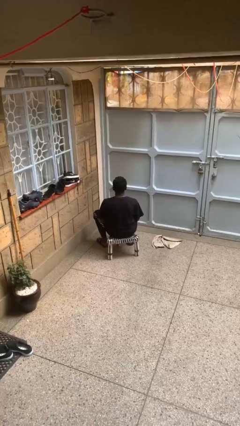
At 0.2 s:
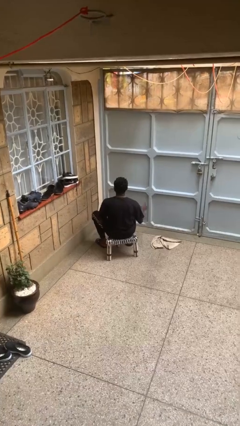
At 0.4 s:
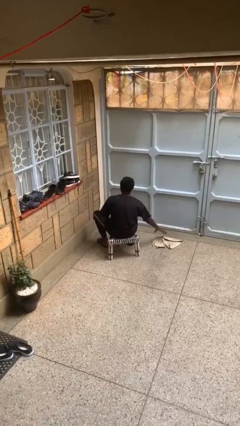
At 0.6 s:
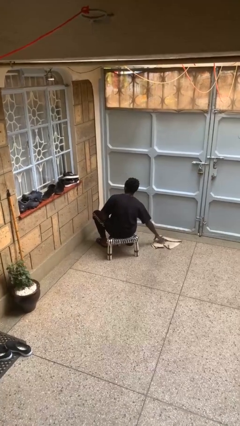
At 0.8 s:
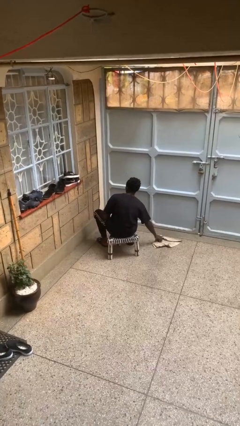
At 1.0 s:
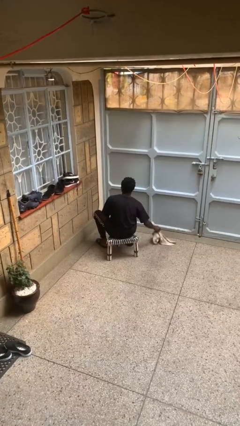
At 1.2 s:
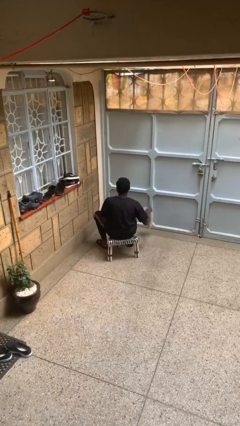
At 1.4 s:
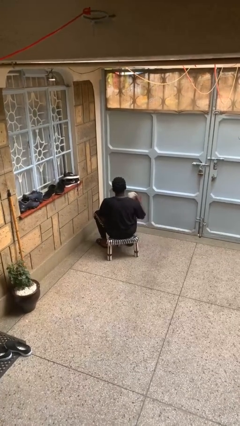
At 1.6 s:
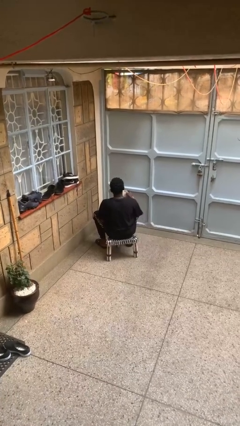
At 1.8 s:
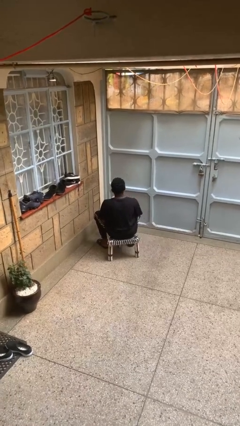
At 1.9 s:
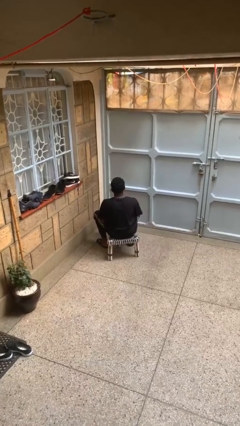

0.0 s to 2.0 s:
person picks up object from floor

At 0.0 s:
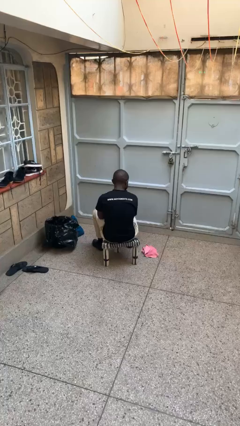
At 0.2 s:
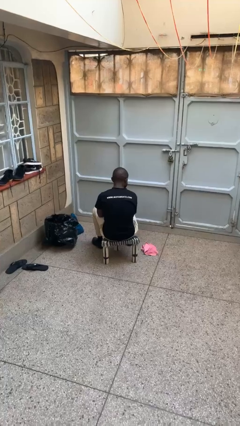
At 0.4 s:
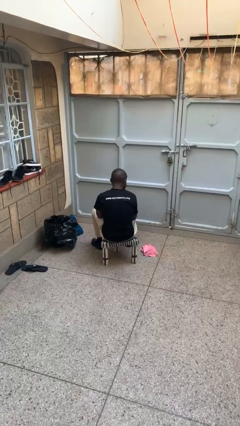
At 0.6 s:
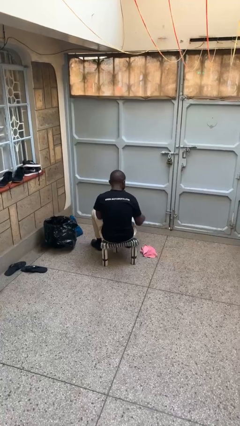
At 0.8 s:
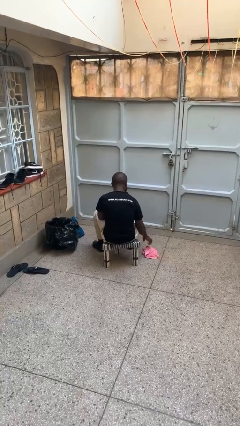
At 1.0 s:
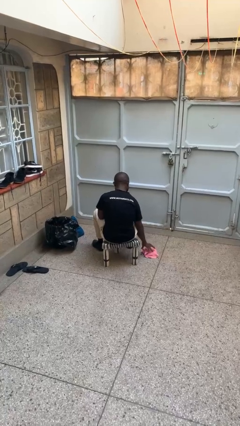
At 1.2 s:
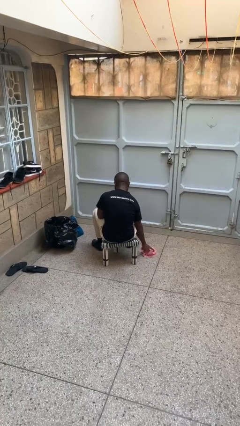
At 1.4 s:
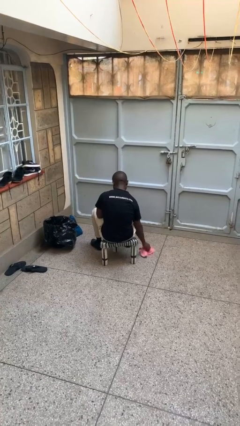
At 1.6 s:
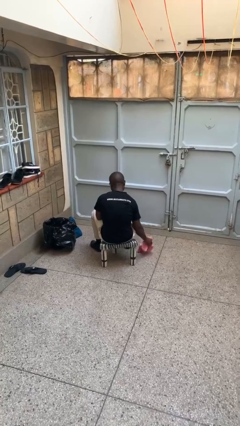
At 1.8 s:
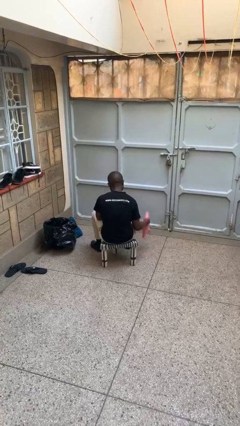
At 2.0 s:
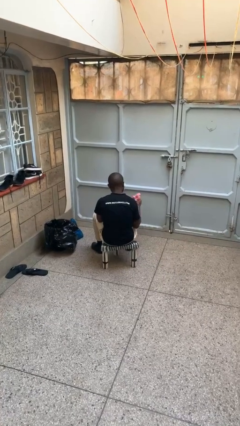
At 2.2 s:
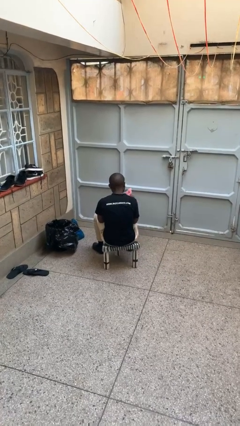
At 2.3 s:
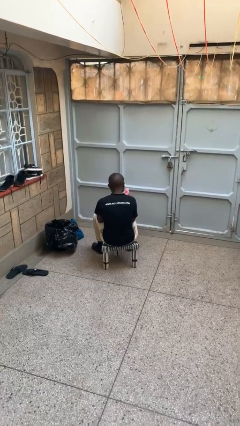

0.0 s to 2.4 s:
person picks up object from table

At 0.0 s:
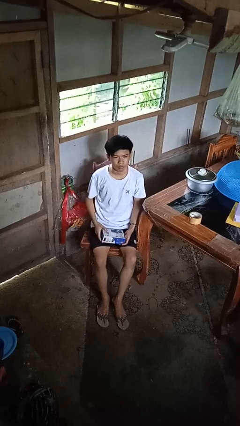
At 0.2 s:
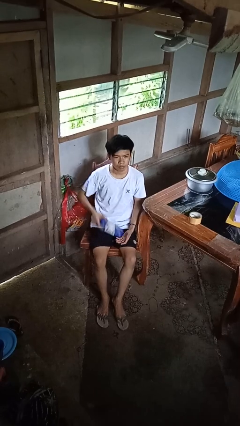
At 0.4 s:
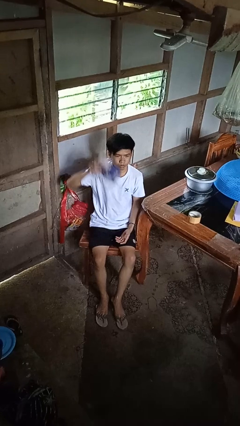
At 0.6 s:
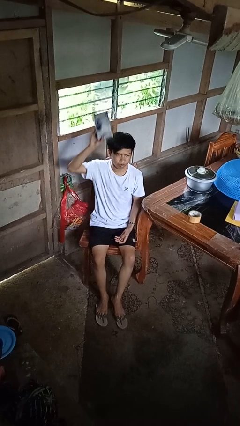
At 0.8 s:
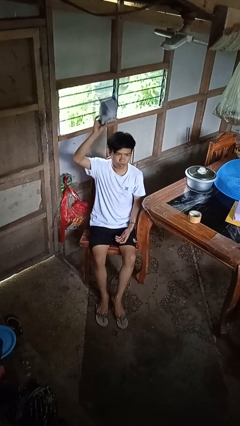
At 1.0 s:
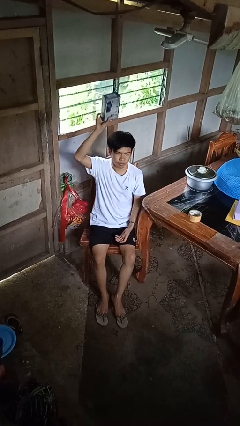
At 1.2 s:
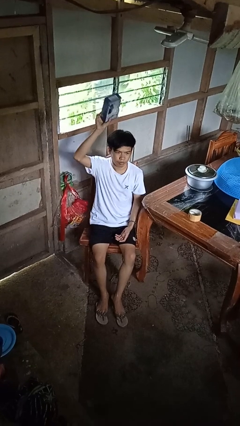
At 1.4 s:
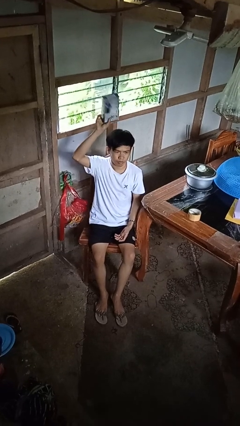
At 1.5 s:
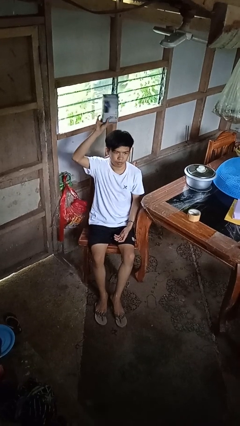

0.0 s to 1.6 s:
person holds object above head

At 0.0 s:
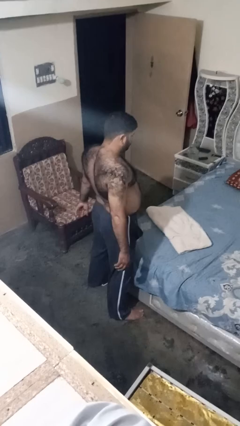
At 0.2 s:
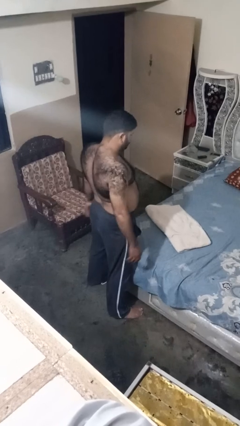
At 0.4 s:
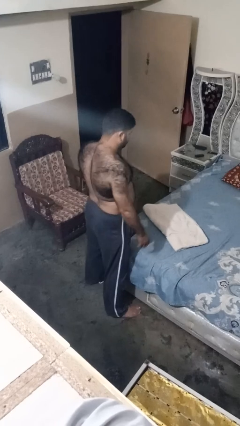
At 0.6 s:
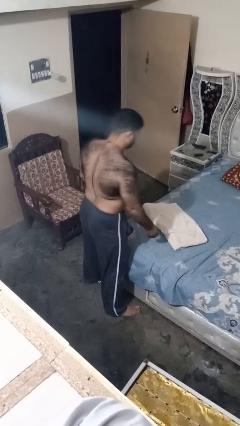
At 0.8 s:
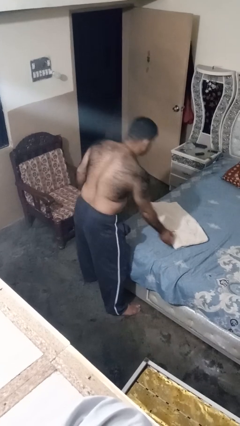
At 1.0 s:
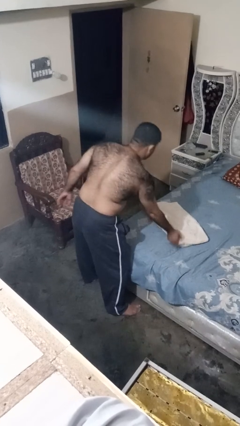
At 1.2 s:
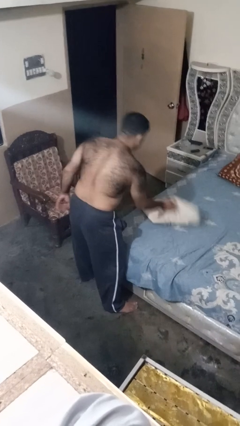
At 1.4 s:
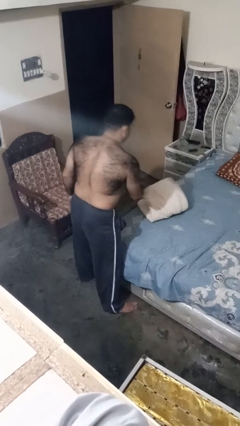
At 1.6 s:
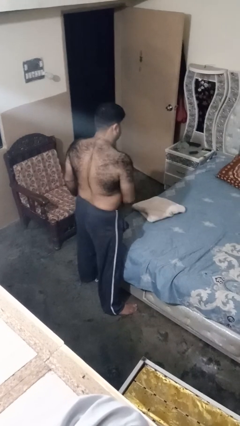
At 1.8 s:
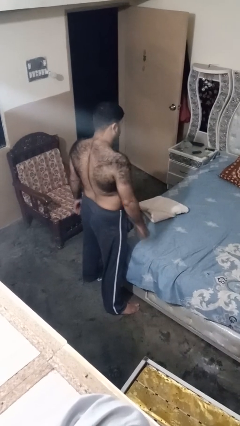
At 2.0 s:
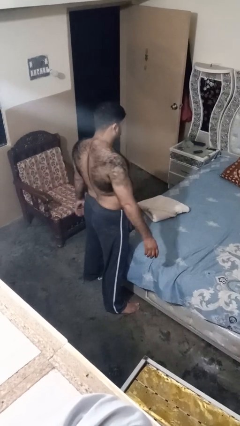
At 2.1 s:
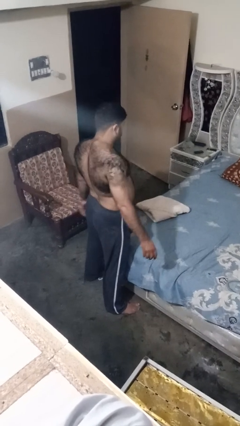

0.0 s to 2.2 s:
person folds towel

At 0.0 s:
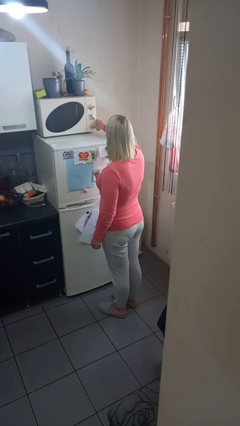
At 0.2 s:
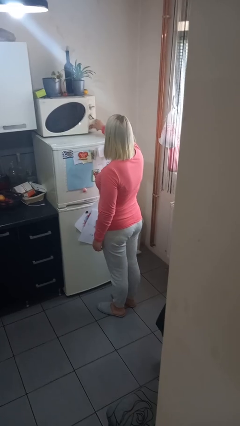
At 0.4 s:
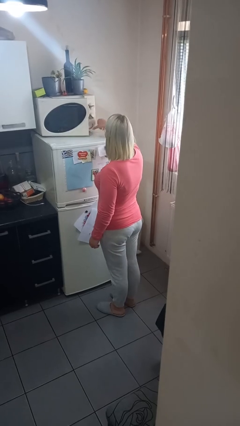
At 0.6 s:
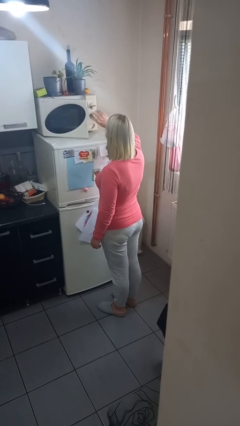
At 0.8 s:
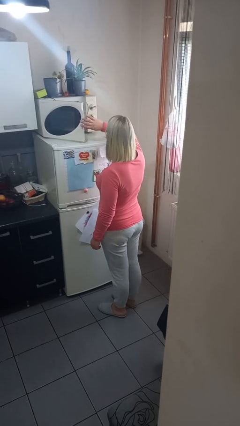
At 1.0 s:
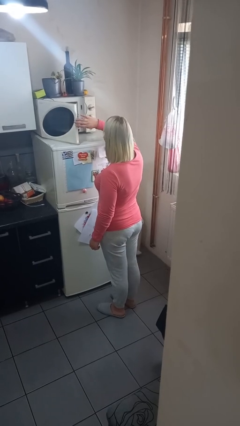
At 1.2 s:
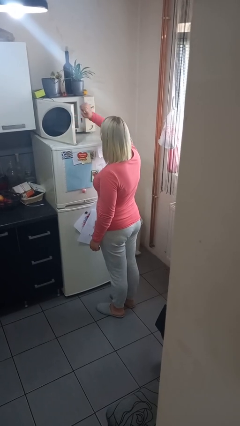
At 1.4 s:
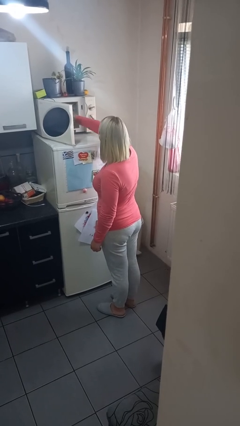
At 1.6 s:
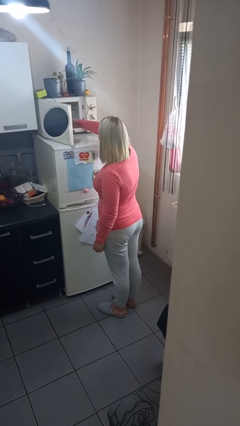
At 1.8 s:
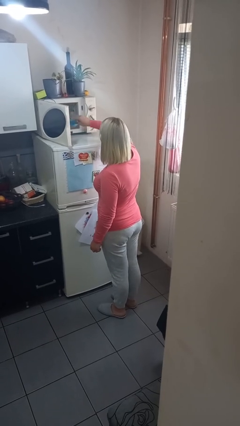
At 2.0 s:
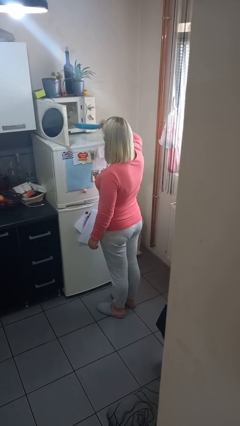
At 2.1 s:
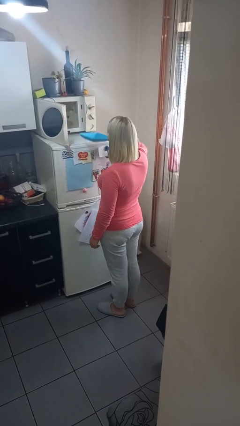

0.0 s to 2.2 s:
person takes object from microwave

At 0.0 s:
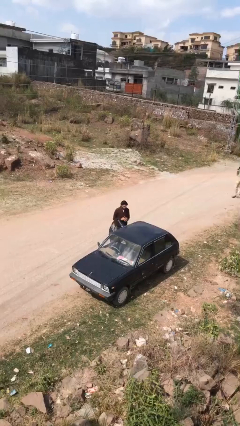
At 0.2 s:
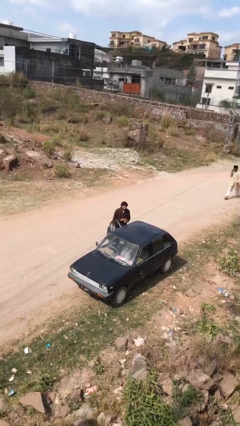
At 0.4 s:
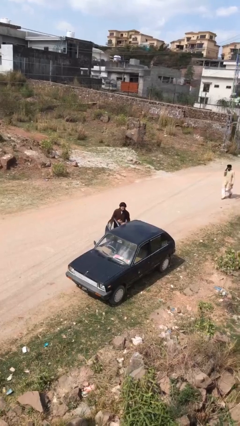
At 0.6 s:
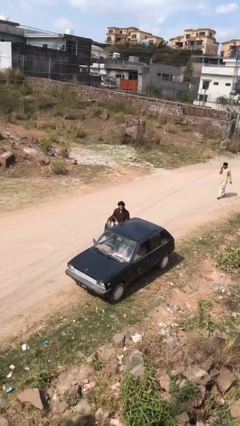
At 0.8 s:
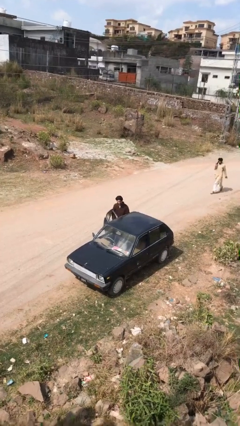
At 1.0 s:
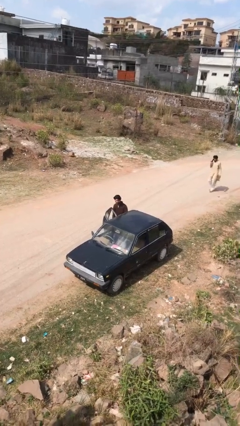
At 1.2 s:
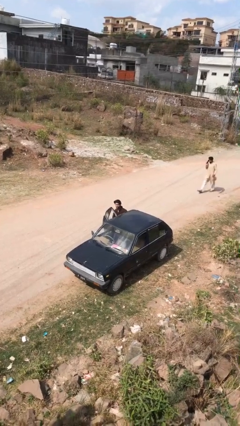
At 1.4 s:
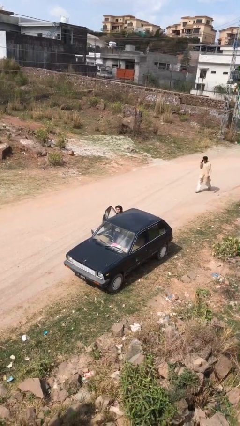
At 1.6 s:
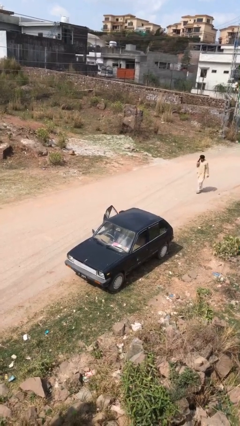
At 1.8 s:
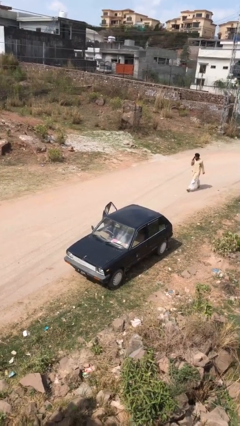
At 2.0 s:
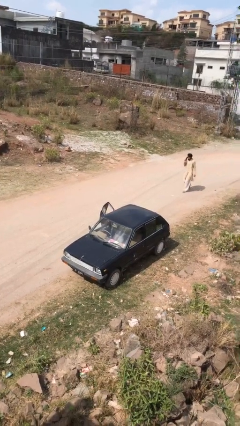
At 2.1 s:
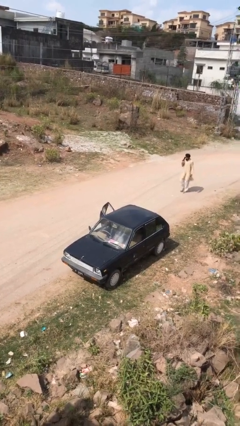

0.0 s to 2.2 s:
person enters car

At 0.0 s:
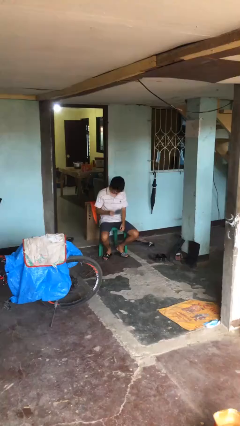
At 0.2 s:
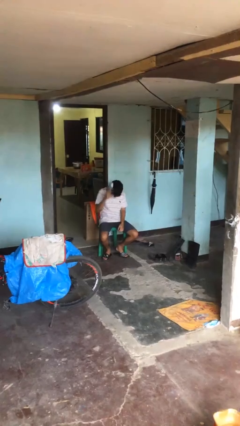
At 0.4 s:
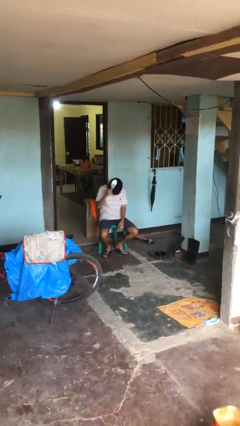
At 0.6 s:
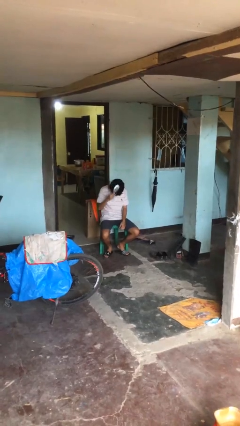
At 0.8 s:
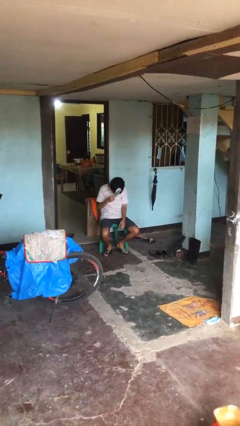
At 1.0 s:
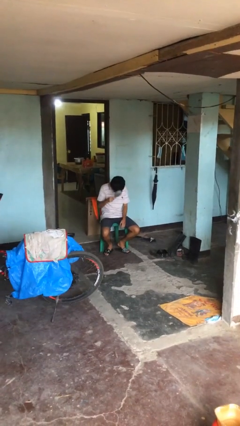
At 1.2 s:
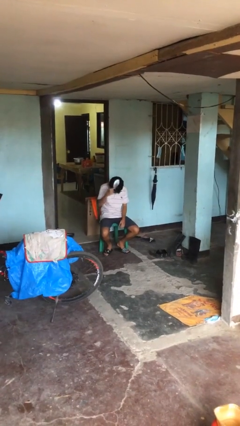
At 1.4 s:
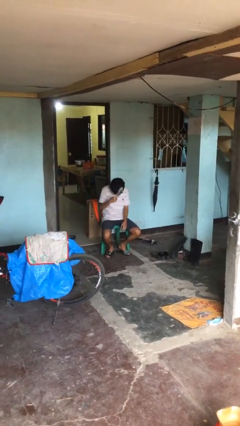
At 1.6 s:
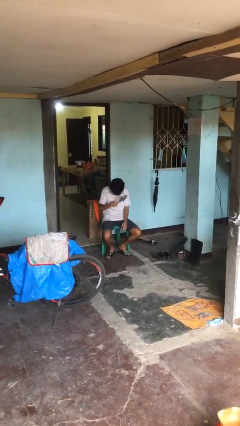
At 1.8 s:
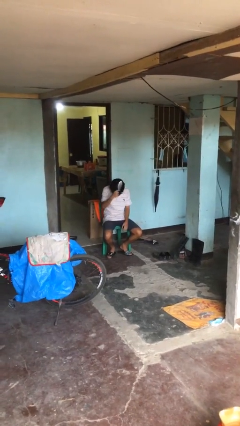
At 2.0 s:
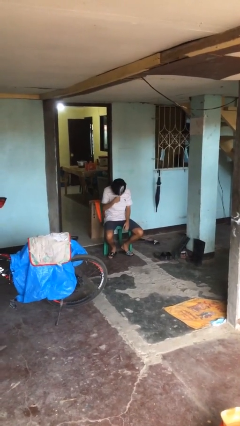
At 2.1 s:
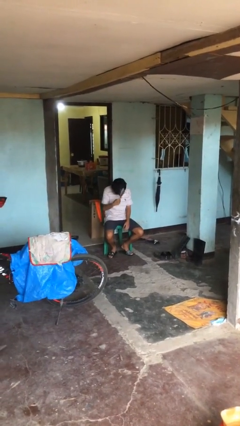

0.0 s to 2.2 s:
person brushes hair

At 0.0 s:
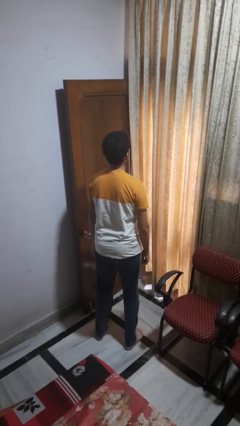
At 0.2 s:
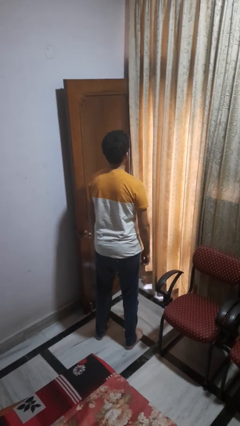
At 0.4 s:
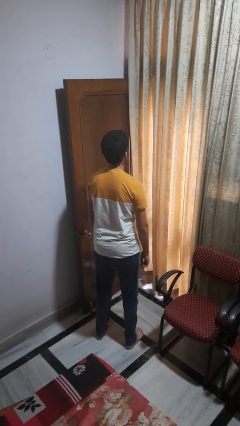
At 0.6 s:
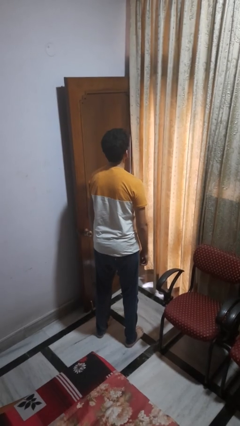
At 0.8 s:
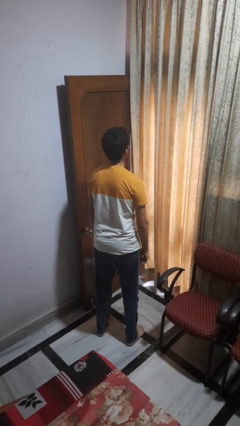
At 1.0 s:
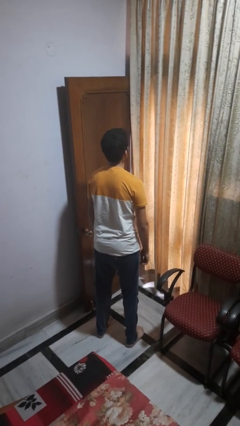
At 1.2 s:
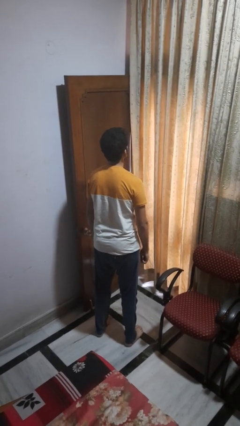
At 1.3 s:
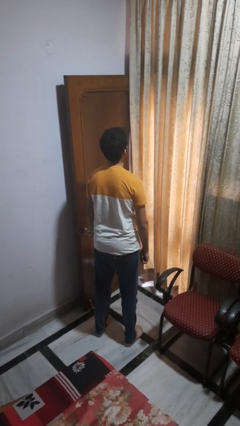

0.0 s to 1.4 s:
person jumps

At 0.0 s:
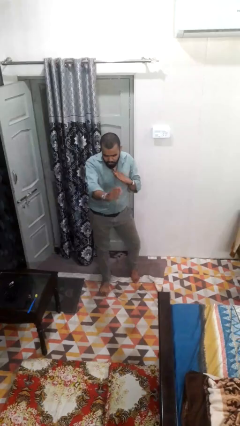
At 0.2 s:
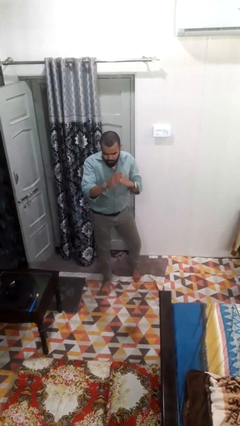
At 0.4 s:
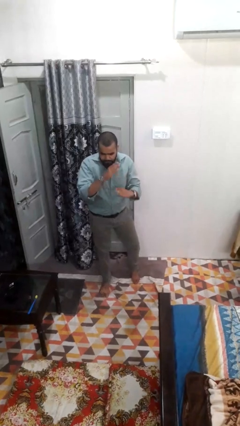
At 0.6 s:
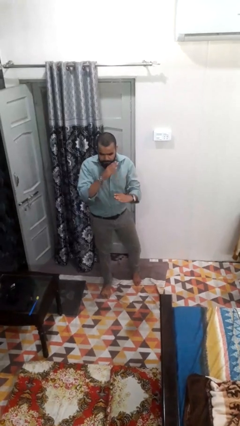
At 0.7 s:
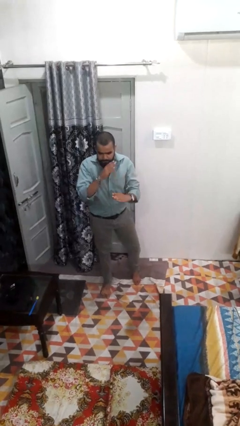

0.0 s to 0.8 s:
person karate chop
